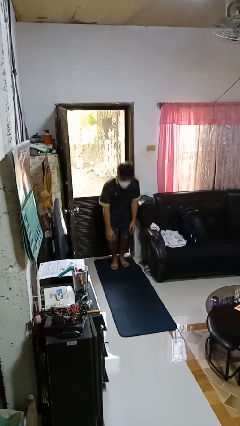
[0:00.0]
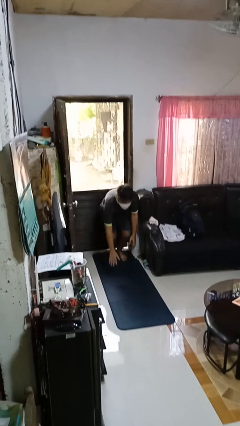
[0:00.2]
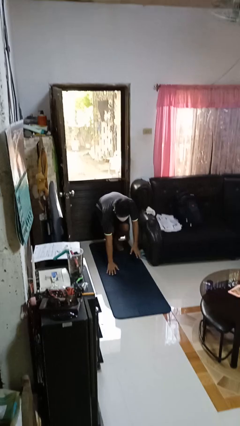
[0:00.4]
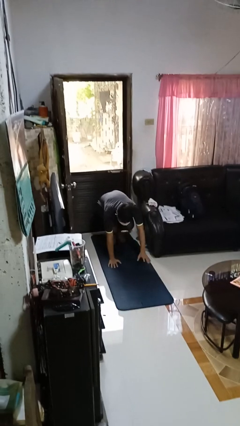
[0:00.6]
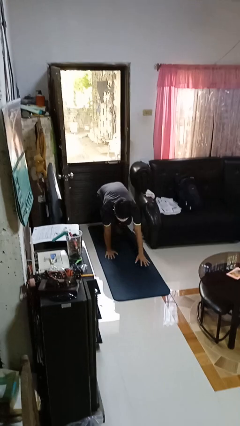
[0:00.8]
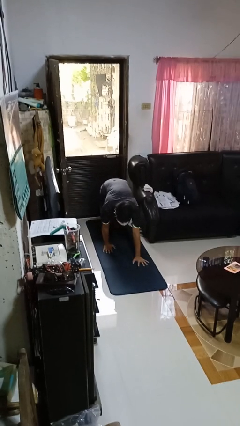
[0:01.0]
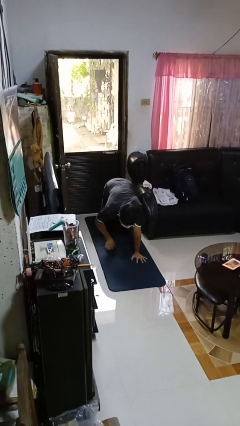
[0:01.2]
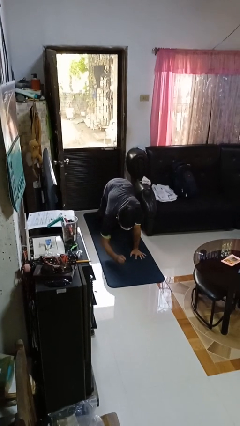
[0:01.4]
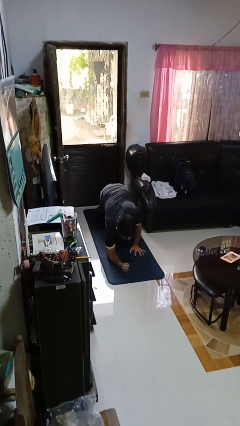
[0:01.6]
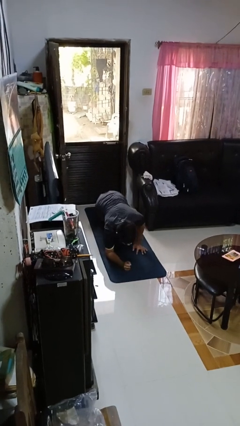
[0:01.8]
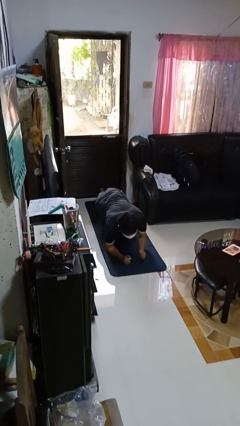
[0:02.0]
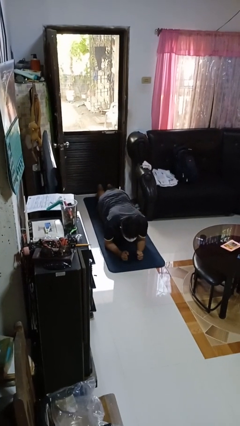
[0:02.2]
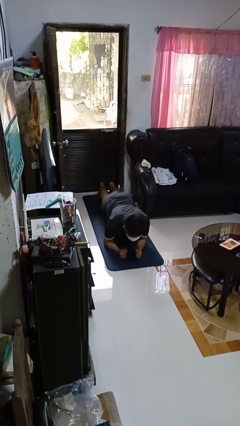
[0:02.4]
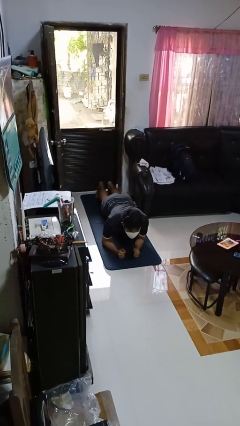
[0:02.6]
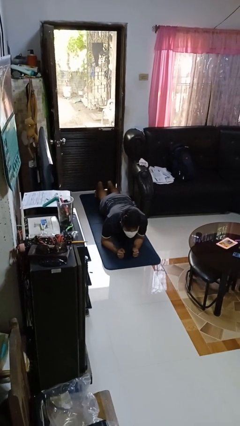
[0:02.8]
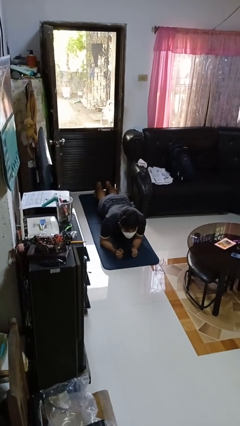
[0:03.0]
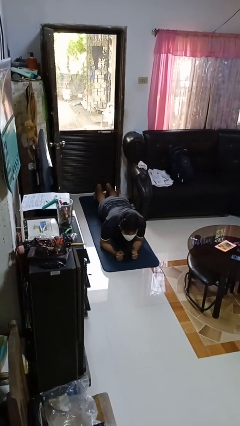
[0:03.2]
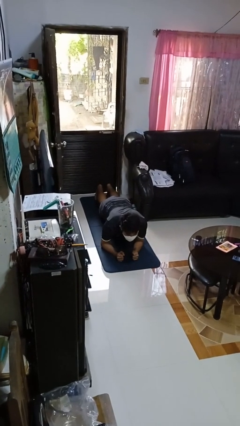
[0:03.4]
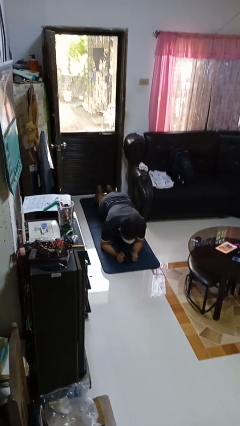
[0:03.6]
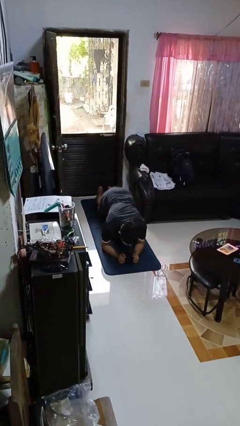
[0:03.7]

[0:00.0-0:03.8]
person exercises with plank

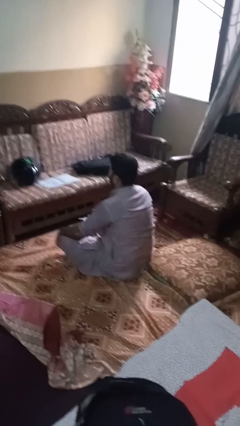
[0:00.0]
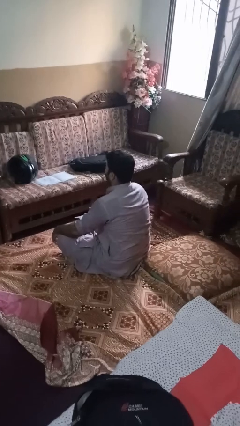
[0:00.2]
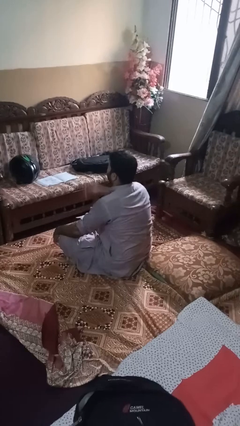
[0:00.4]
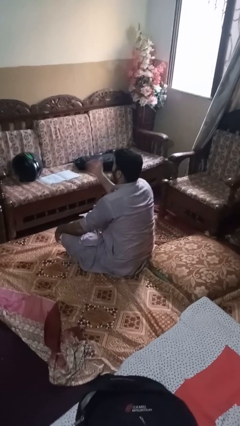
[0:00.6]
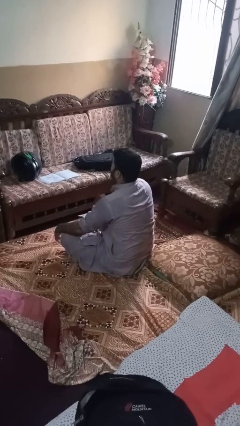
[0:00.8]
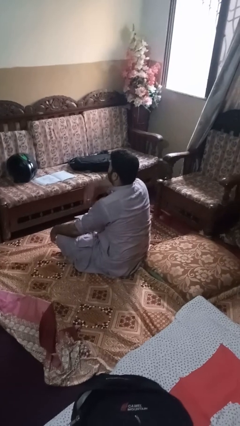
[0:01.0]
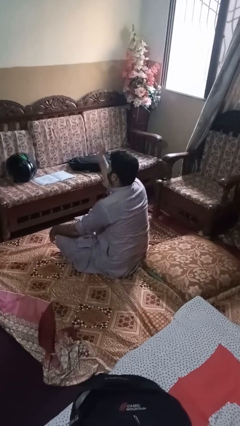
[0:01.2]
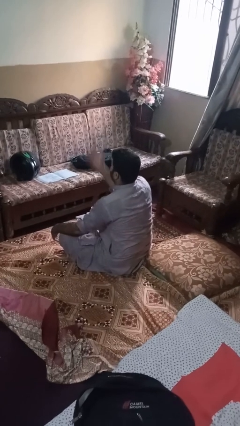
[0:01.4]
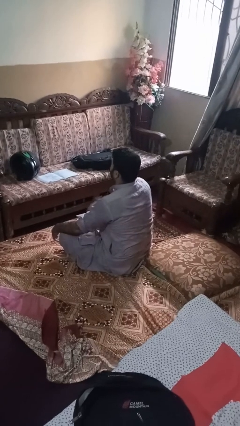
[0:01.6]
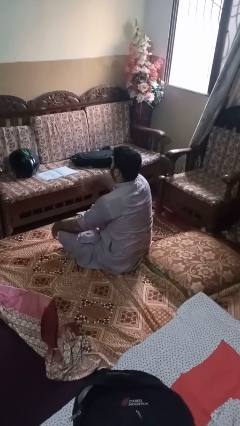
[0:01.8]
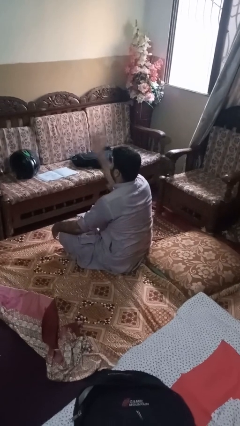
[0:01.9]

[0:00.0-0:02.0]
person drums on chest

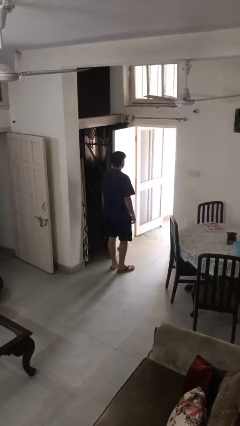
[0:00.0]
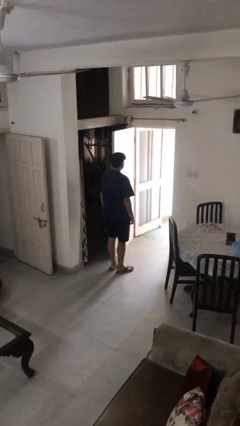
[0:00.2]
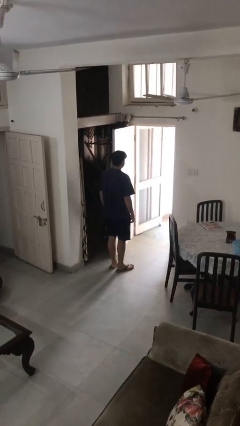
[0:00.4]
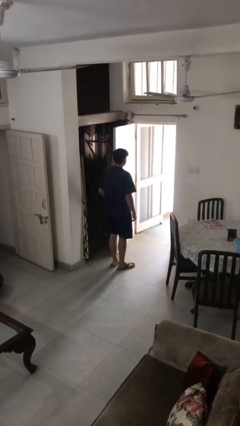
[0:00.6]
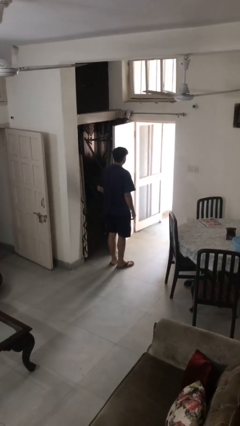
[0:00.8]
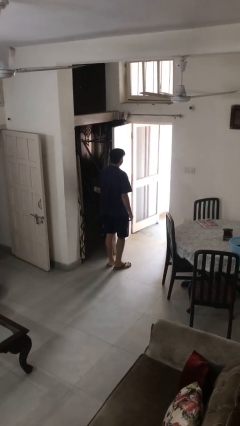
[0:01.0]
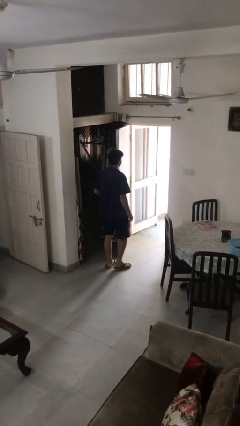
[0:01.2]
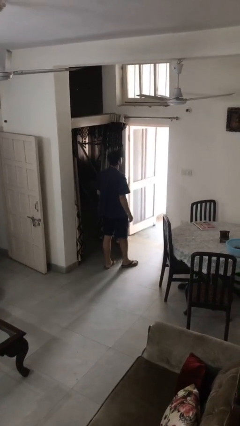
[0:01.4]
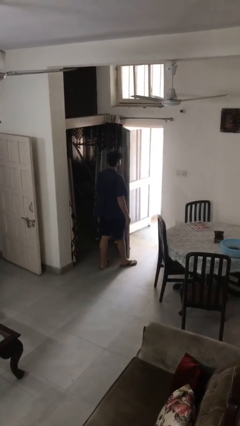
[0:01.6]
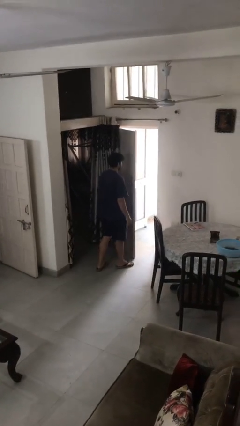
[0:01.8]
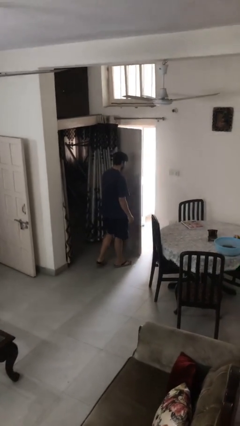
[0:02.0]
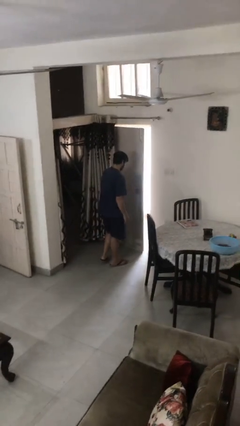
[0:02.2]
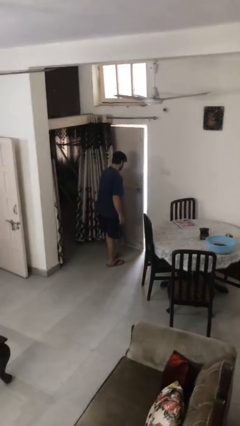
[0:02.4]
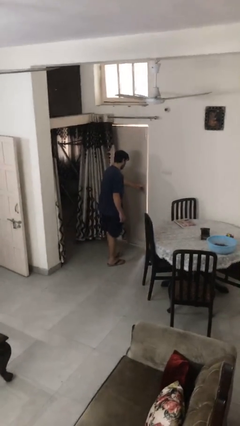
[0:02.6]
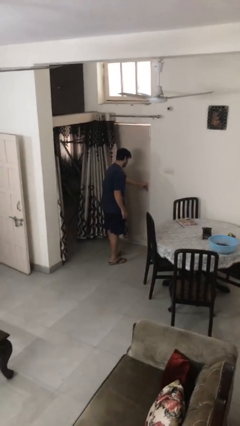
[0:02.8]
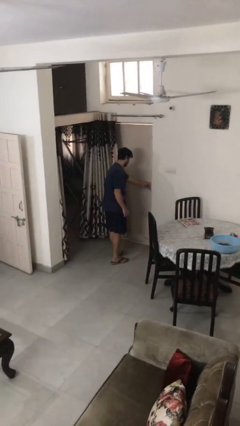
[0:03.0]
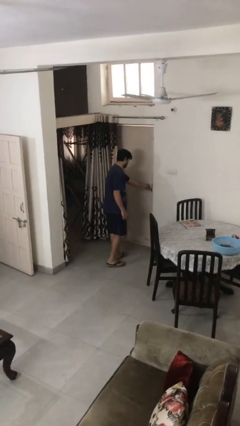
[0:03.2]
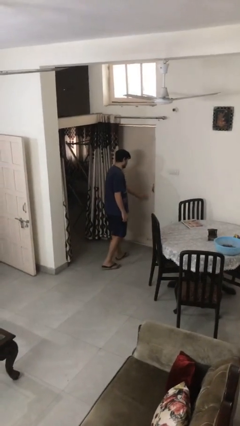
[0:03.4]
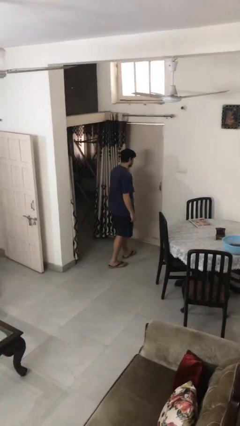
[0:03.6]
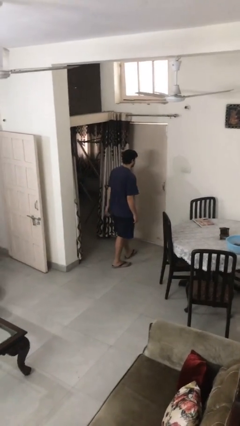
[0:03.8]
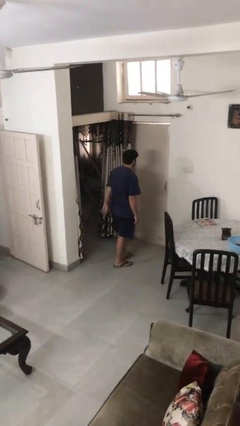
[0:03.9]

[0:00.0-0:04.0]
person closes facility door

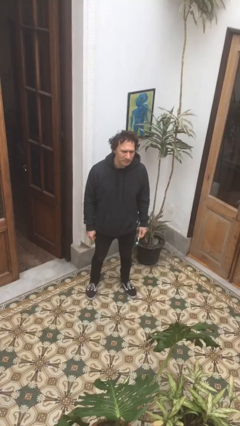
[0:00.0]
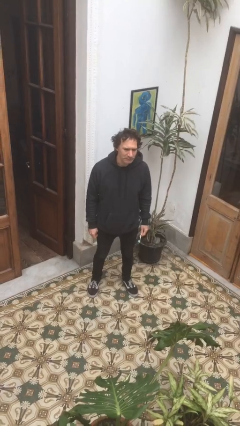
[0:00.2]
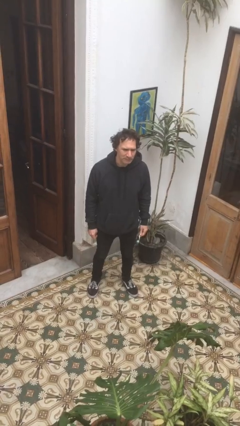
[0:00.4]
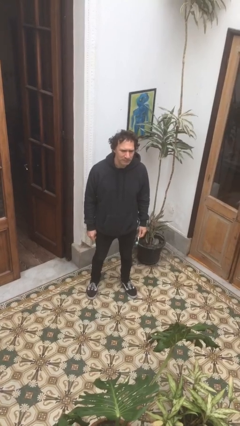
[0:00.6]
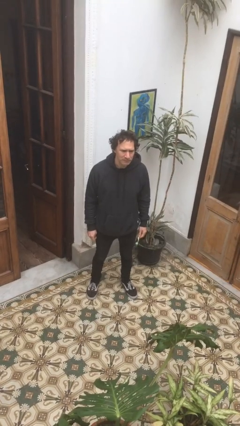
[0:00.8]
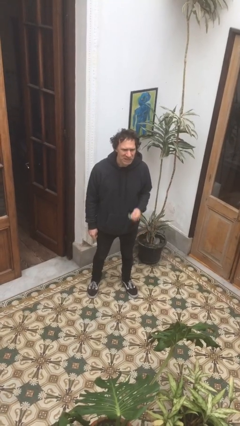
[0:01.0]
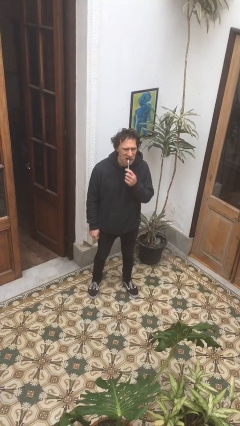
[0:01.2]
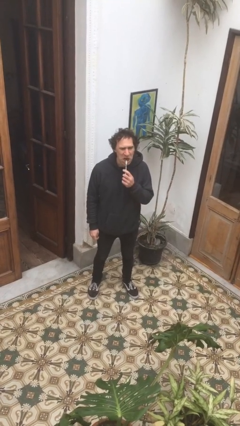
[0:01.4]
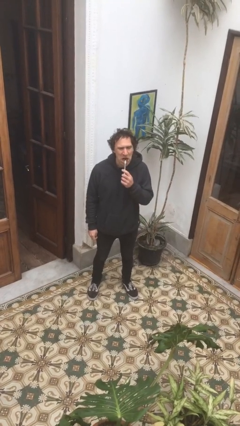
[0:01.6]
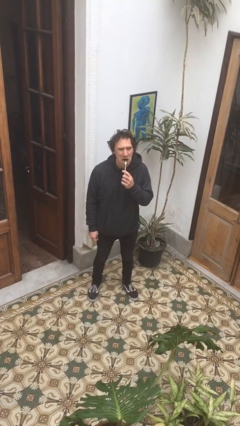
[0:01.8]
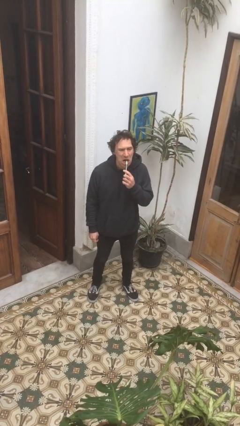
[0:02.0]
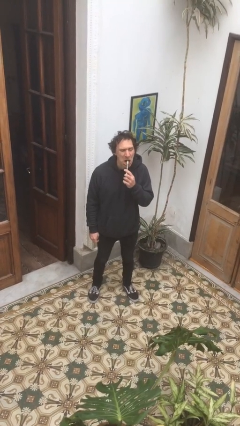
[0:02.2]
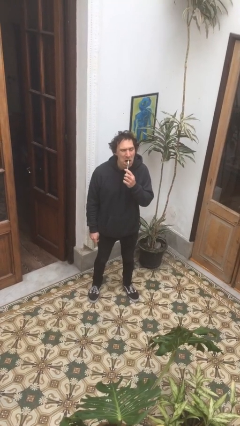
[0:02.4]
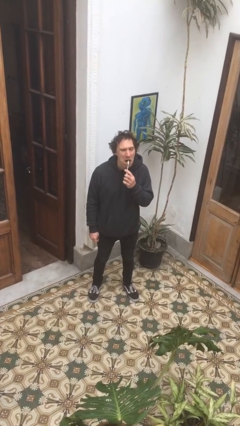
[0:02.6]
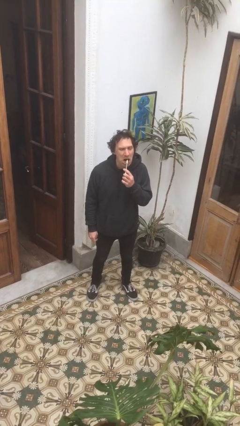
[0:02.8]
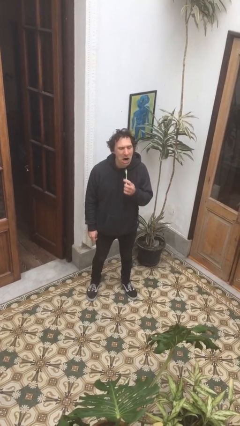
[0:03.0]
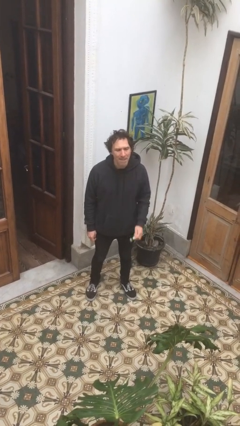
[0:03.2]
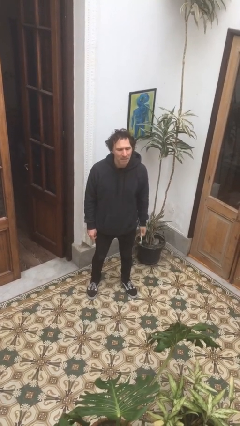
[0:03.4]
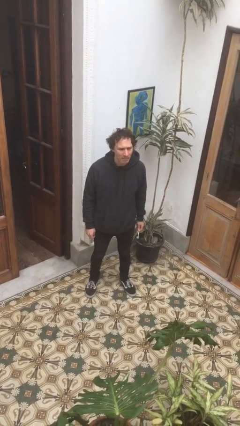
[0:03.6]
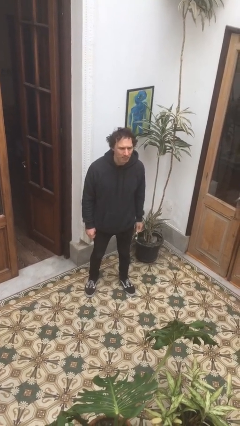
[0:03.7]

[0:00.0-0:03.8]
person brushes teeth

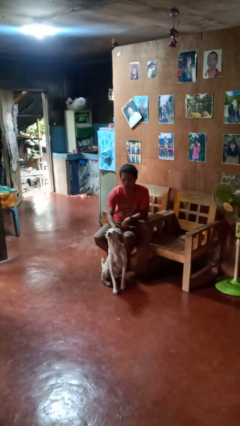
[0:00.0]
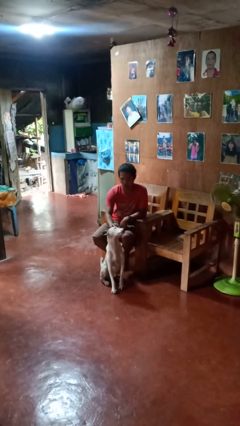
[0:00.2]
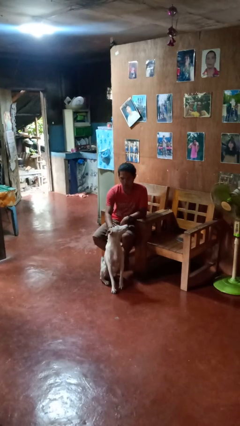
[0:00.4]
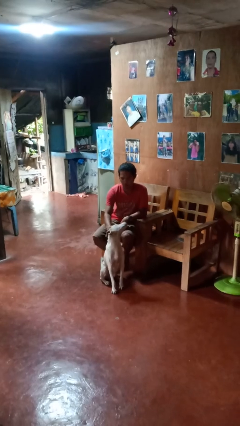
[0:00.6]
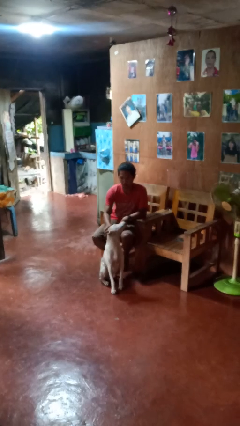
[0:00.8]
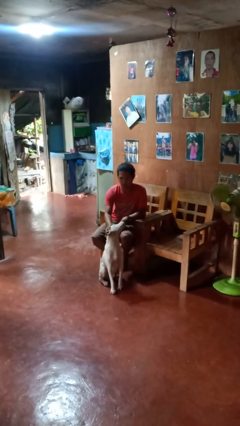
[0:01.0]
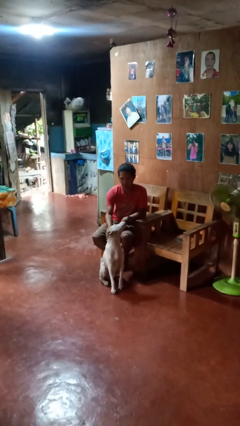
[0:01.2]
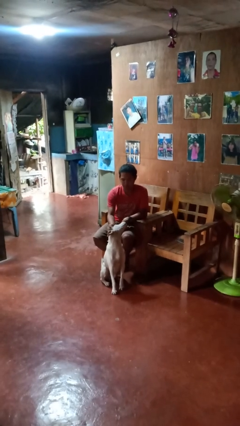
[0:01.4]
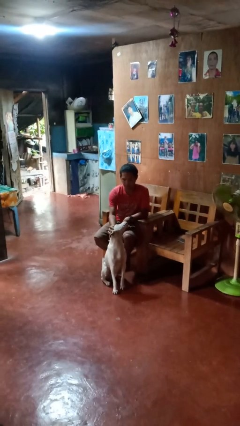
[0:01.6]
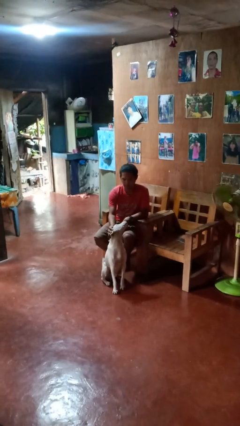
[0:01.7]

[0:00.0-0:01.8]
person pets dog

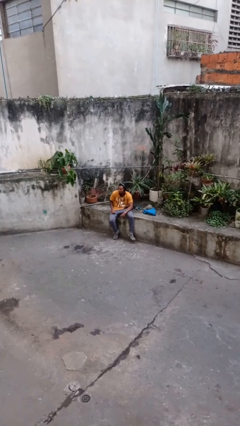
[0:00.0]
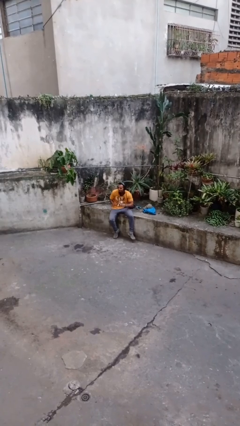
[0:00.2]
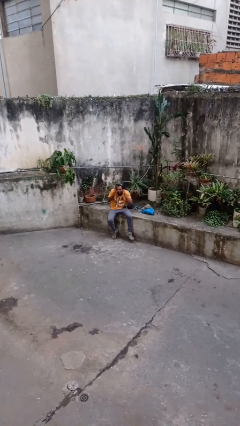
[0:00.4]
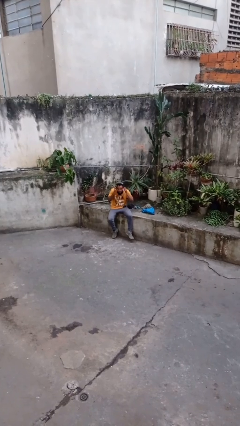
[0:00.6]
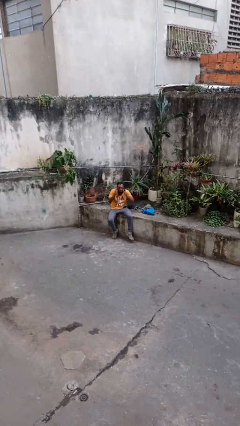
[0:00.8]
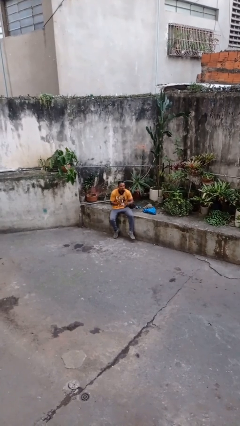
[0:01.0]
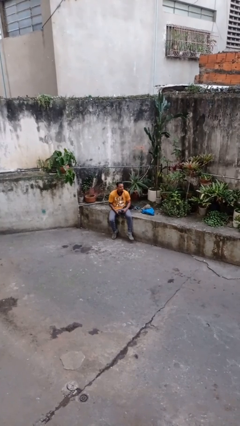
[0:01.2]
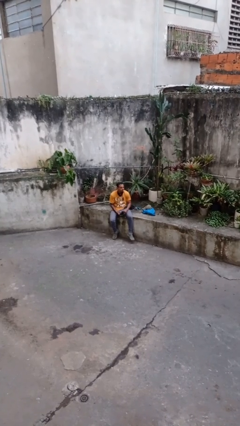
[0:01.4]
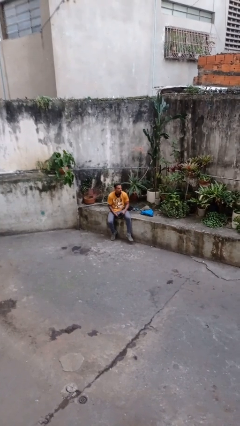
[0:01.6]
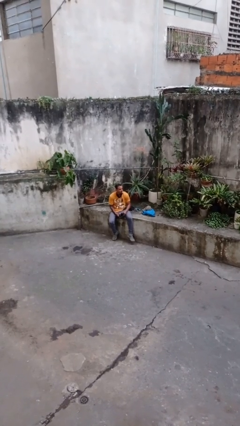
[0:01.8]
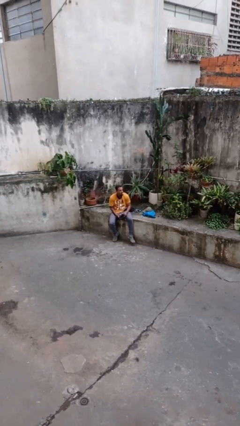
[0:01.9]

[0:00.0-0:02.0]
person takes off headphones

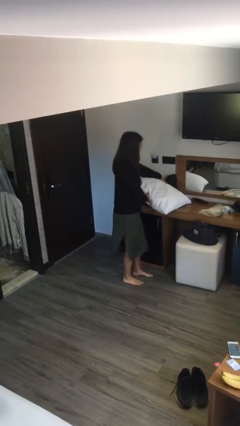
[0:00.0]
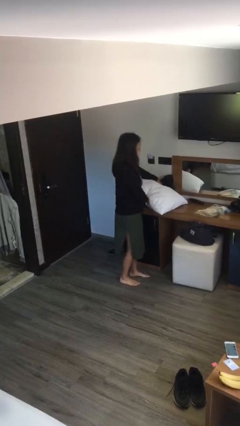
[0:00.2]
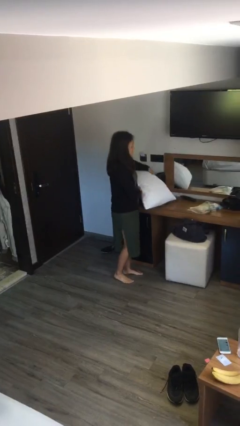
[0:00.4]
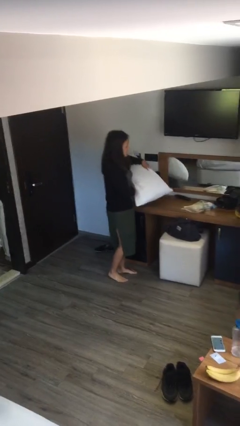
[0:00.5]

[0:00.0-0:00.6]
person picks up object from table
